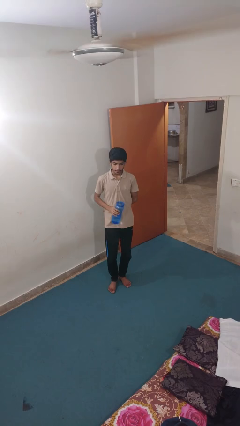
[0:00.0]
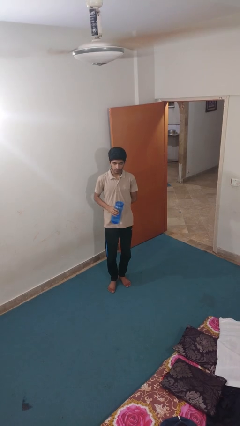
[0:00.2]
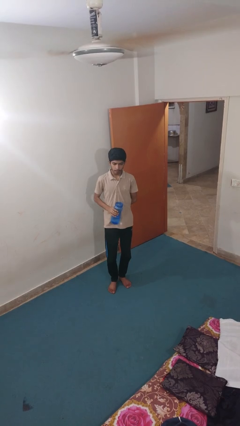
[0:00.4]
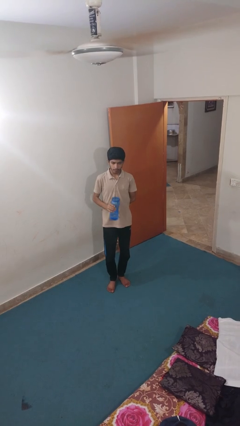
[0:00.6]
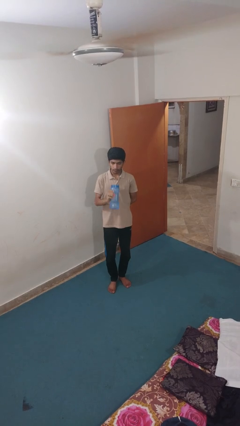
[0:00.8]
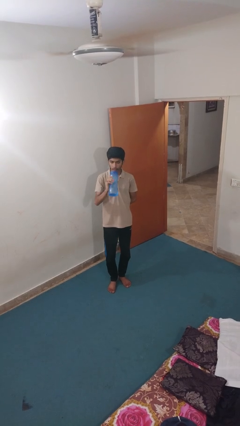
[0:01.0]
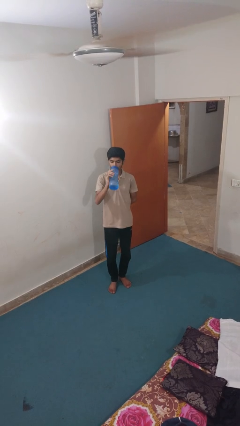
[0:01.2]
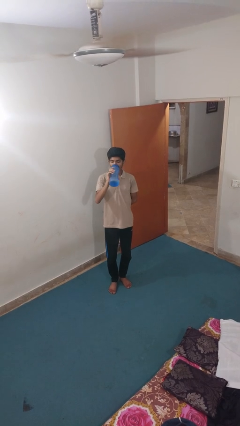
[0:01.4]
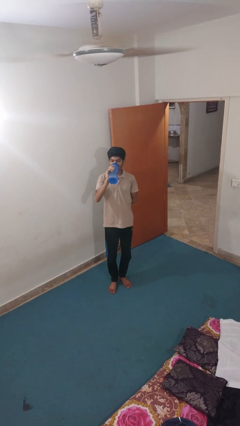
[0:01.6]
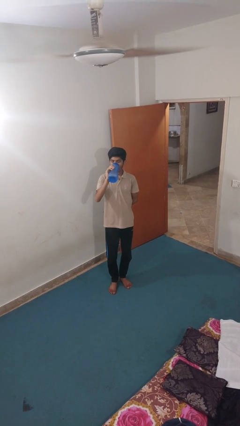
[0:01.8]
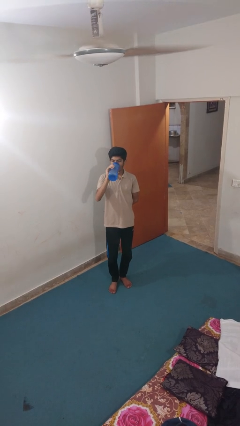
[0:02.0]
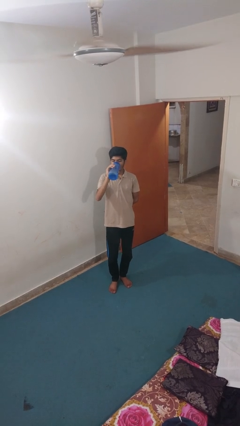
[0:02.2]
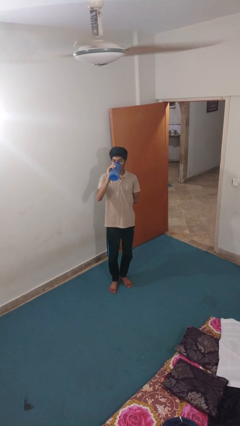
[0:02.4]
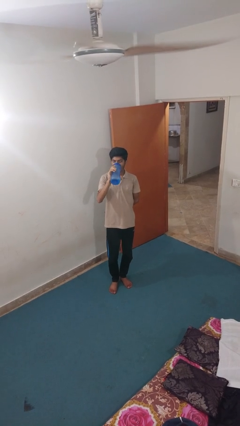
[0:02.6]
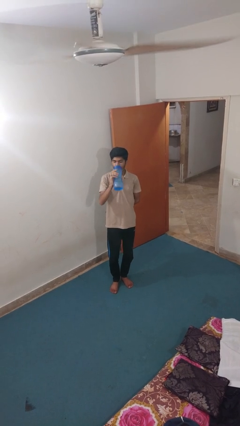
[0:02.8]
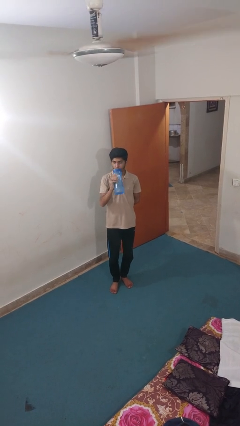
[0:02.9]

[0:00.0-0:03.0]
person drinks from bottle

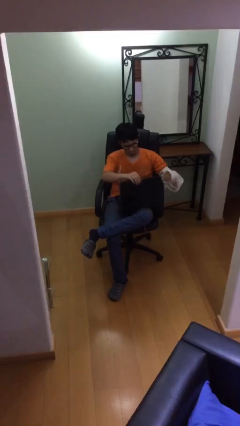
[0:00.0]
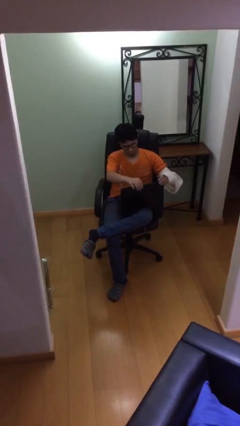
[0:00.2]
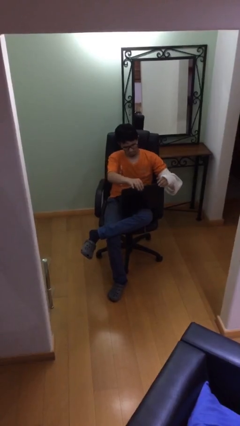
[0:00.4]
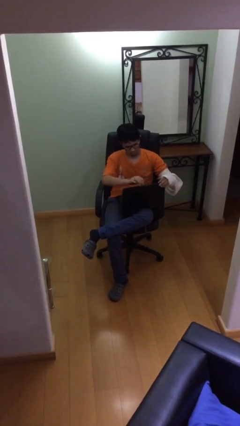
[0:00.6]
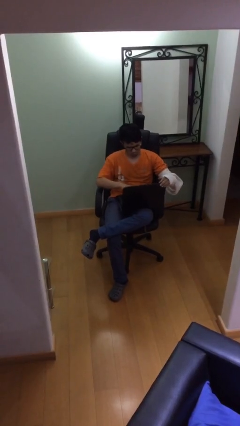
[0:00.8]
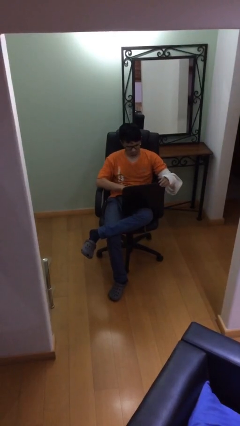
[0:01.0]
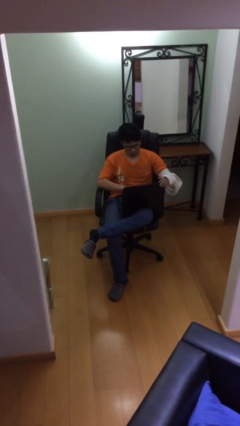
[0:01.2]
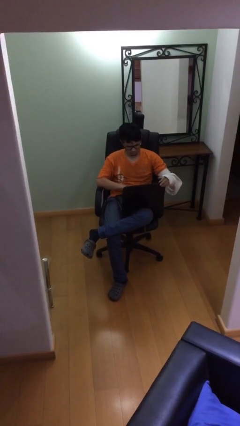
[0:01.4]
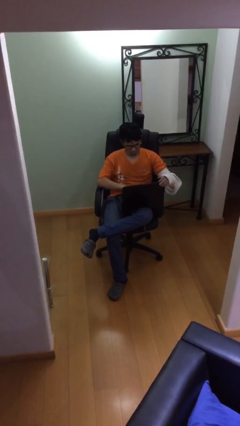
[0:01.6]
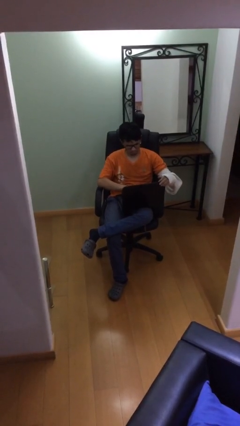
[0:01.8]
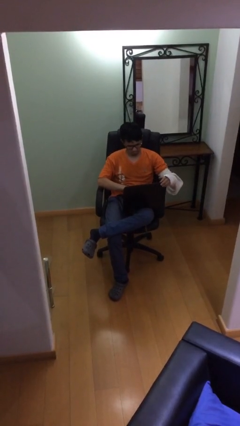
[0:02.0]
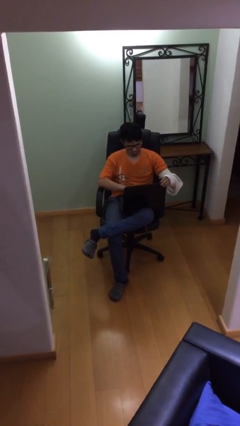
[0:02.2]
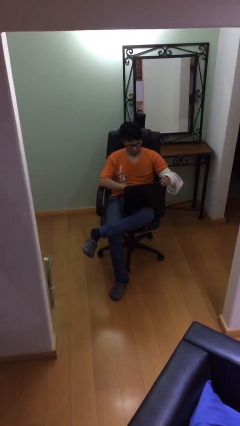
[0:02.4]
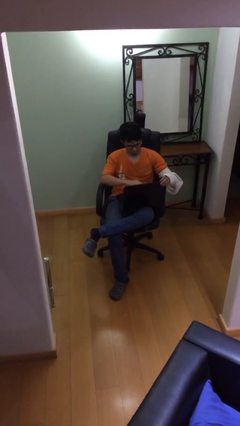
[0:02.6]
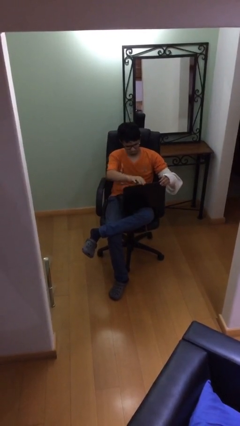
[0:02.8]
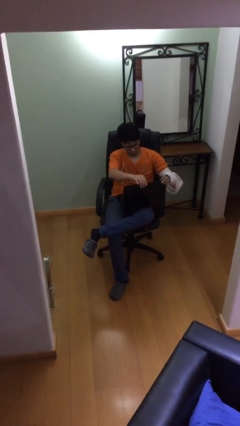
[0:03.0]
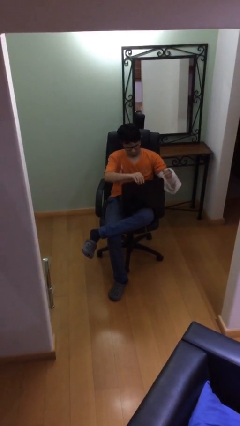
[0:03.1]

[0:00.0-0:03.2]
person interacts with laptop

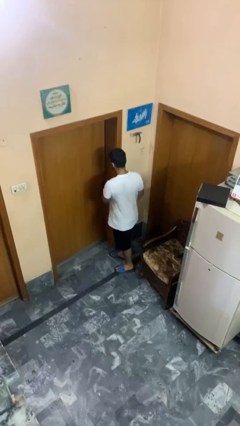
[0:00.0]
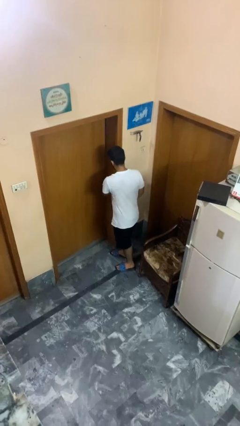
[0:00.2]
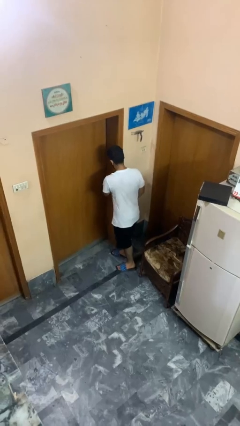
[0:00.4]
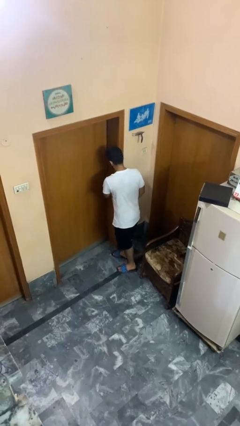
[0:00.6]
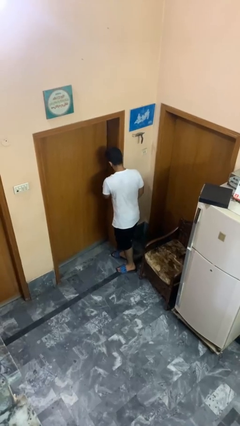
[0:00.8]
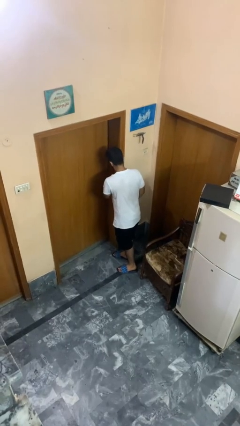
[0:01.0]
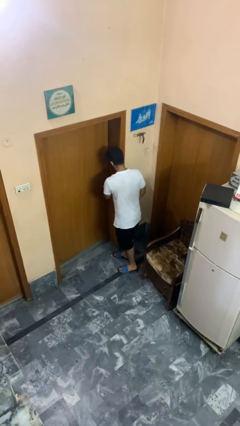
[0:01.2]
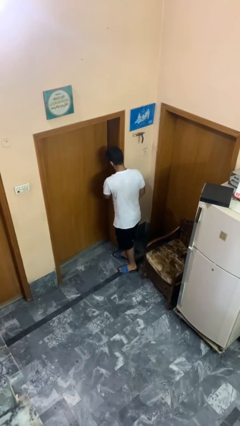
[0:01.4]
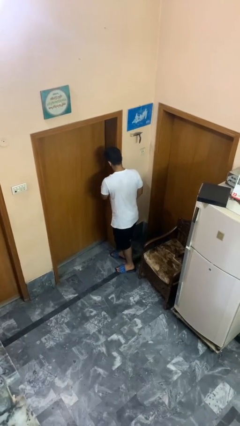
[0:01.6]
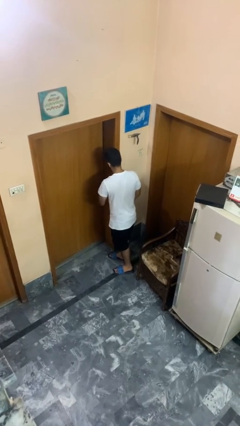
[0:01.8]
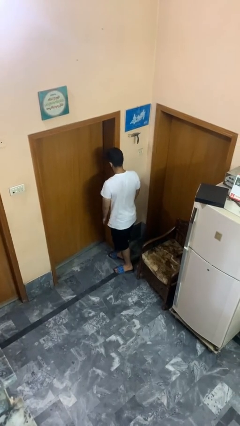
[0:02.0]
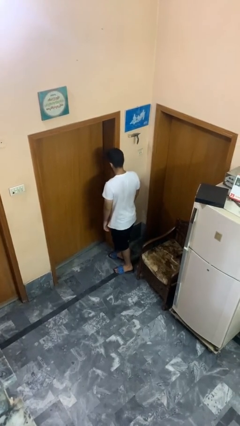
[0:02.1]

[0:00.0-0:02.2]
person locks door with keys

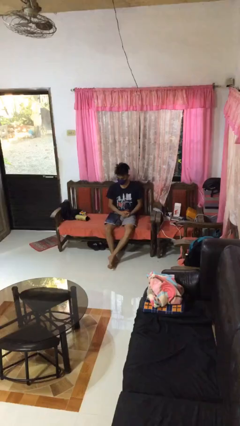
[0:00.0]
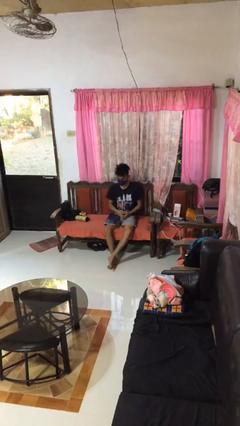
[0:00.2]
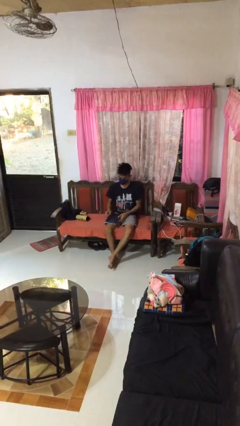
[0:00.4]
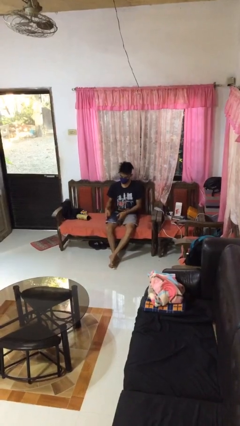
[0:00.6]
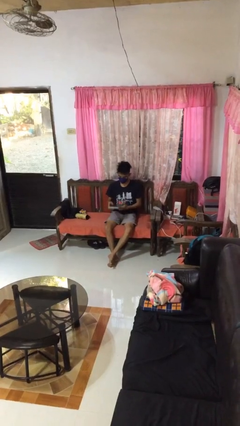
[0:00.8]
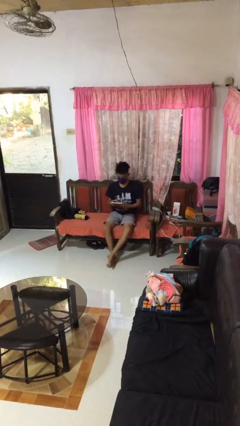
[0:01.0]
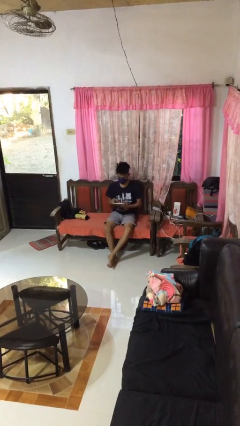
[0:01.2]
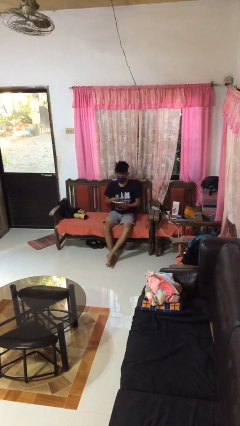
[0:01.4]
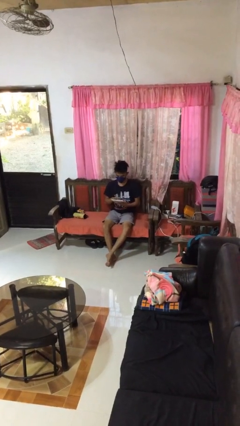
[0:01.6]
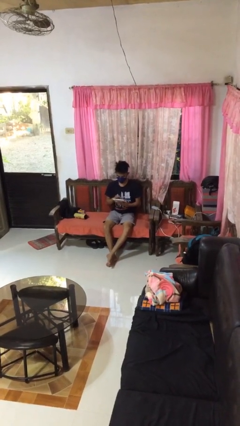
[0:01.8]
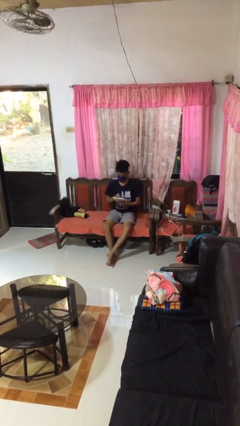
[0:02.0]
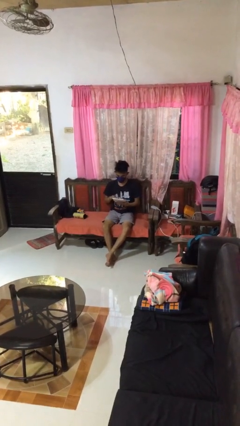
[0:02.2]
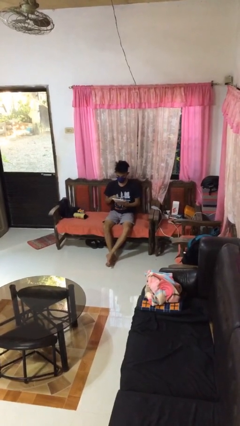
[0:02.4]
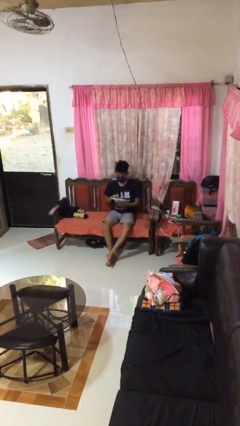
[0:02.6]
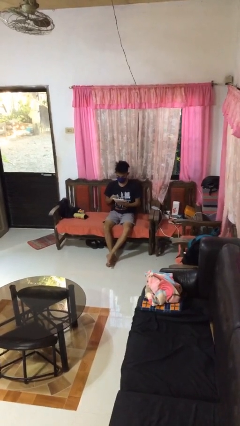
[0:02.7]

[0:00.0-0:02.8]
person interacts with tablet

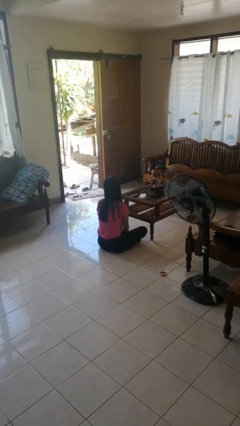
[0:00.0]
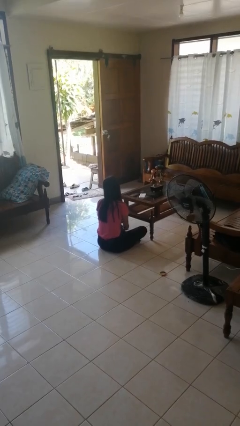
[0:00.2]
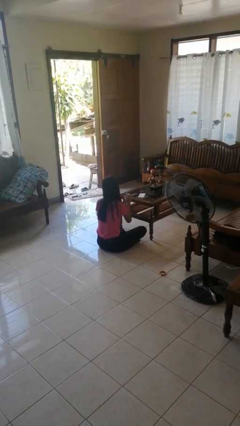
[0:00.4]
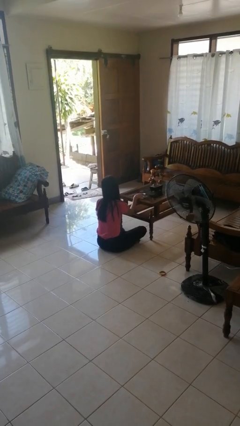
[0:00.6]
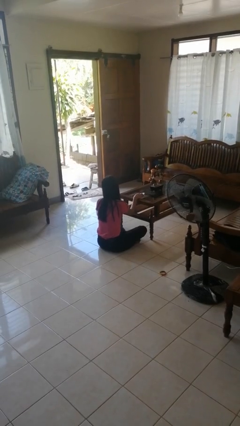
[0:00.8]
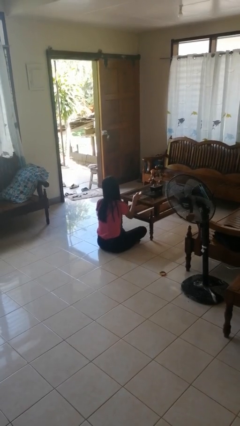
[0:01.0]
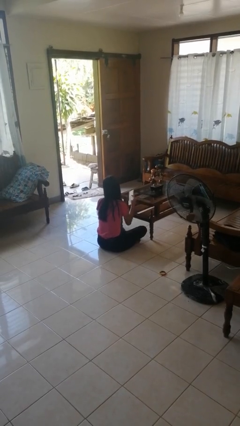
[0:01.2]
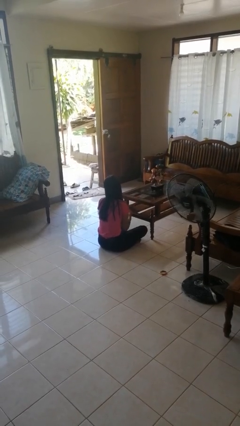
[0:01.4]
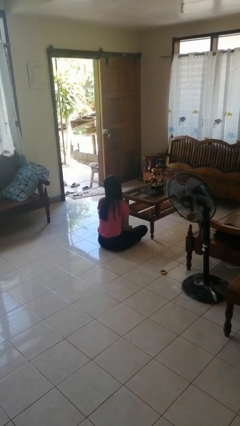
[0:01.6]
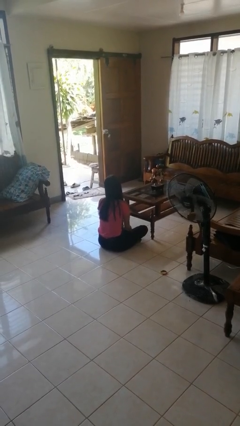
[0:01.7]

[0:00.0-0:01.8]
person picks up object from table

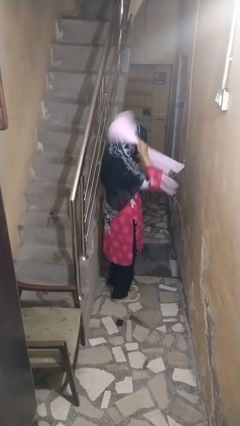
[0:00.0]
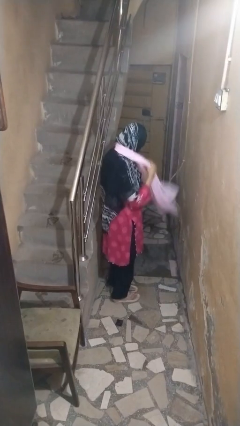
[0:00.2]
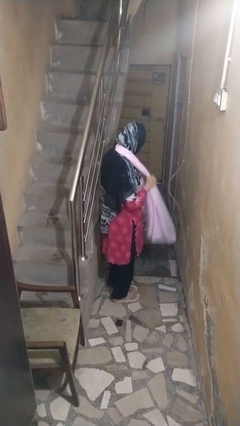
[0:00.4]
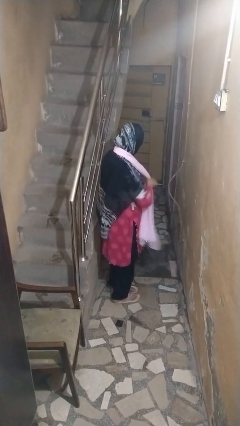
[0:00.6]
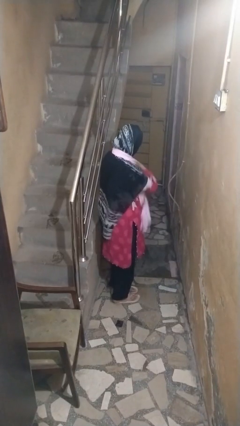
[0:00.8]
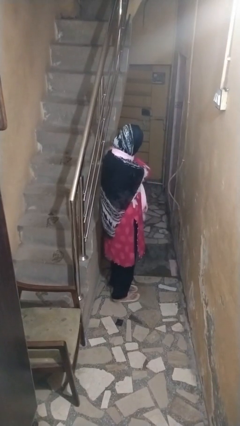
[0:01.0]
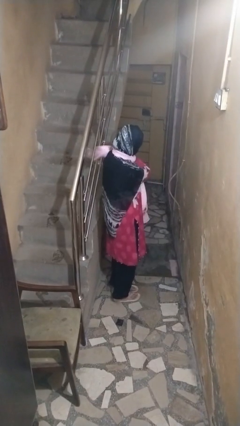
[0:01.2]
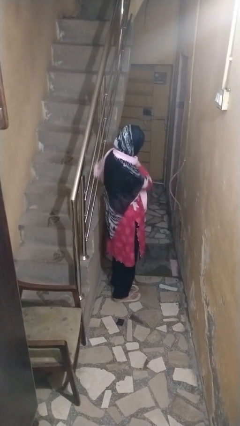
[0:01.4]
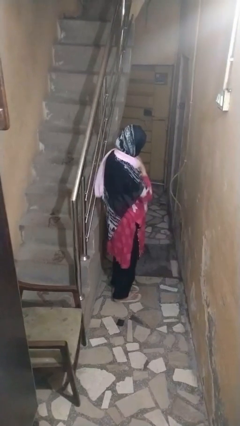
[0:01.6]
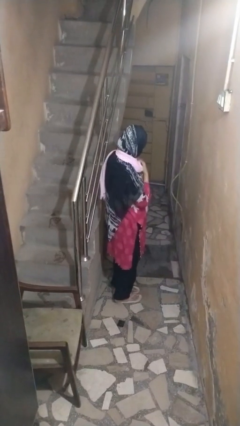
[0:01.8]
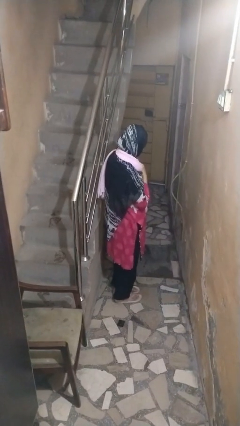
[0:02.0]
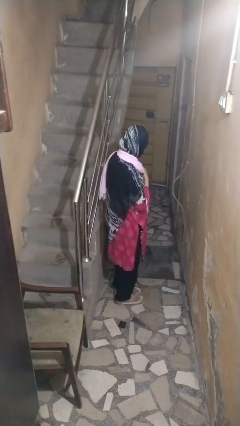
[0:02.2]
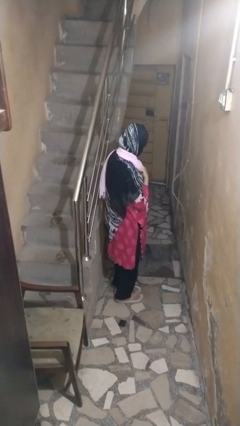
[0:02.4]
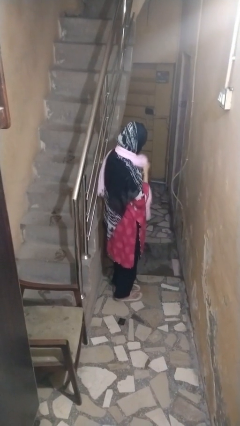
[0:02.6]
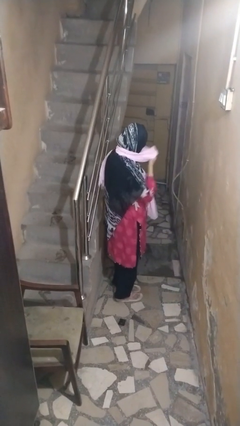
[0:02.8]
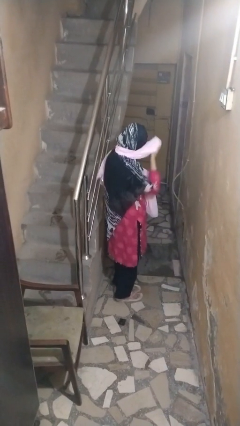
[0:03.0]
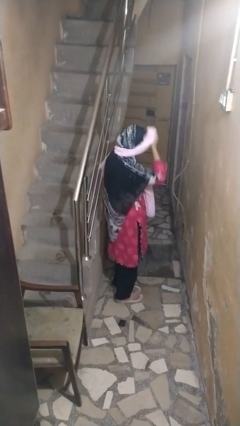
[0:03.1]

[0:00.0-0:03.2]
person puts on scarf

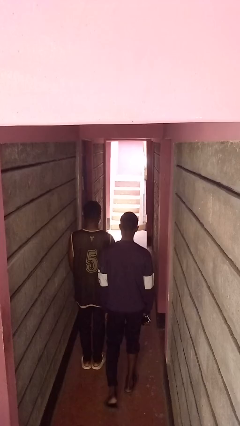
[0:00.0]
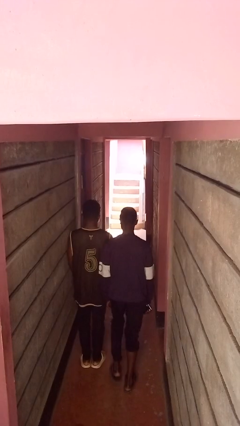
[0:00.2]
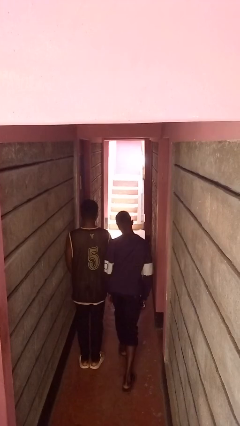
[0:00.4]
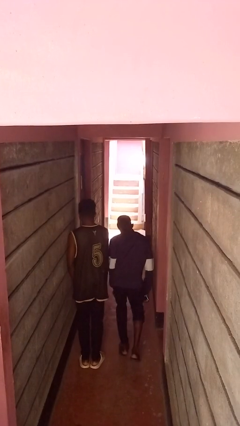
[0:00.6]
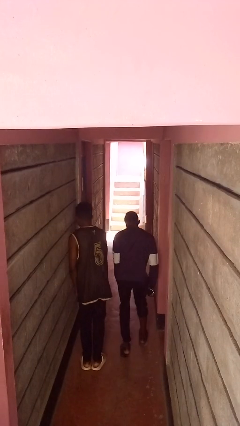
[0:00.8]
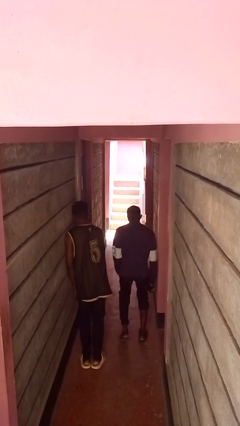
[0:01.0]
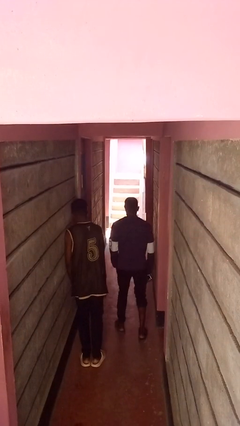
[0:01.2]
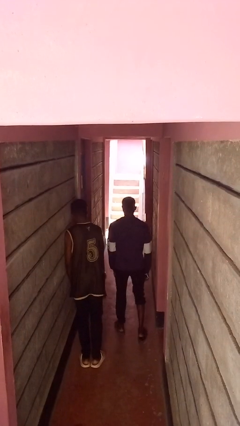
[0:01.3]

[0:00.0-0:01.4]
person bumps into person
